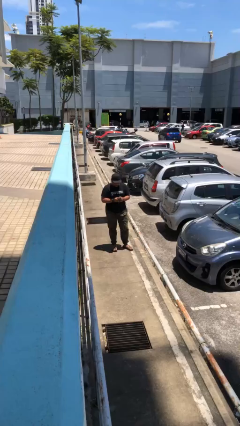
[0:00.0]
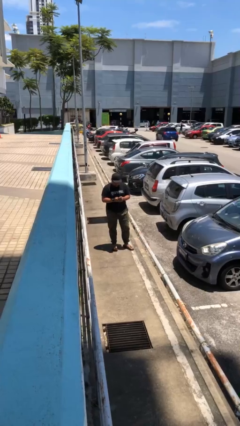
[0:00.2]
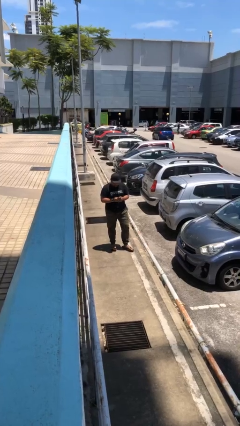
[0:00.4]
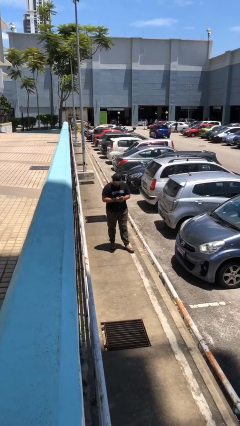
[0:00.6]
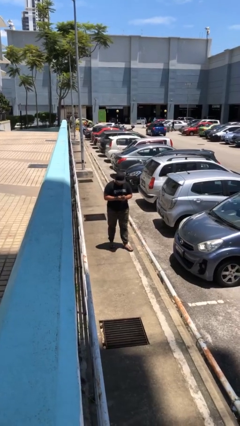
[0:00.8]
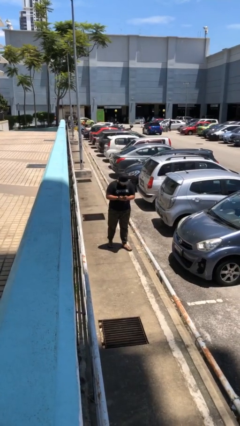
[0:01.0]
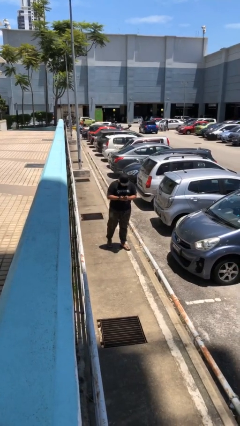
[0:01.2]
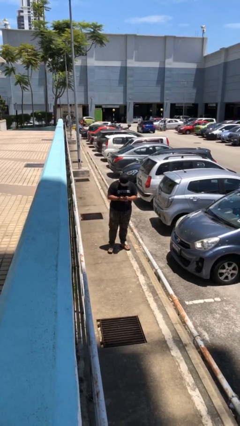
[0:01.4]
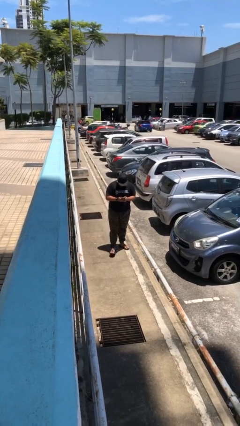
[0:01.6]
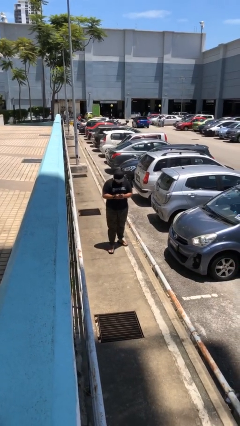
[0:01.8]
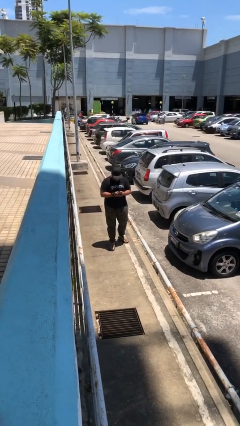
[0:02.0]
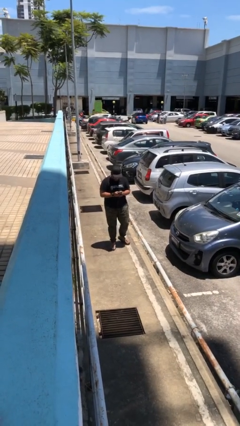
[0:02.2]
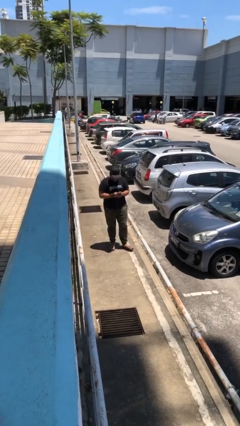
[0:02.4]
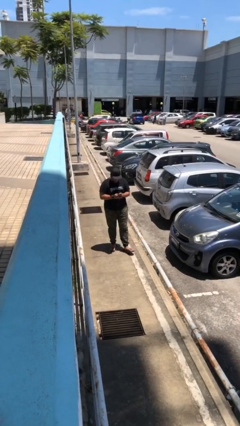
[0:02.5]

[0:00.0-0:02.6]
person texts on phone

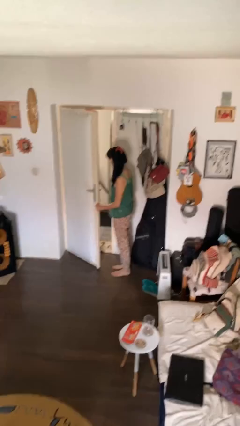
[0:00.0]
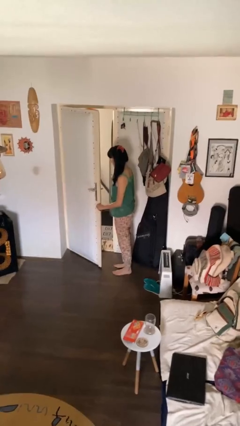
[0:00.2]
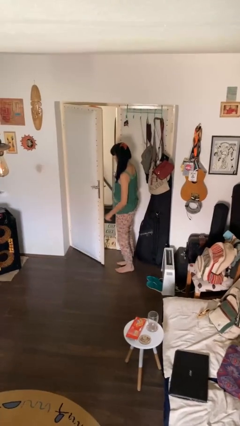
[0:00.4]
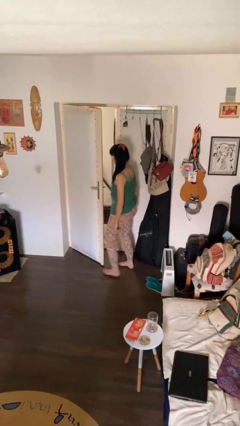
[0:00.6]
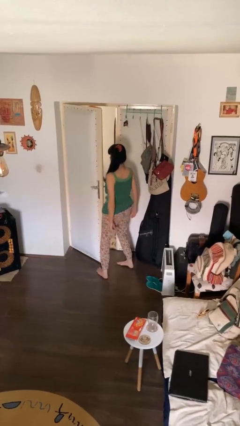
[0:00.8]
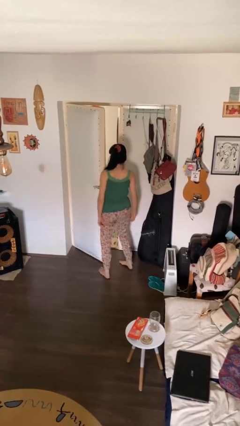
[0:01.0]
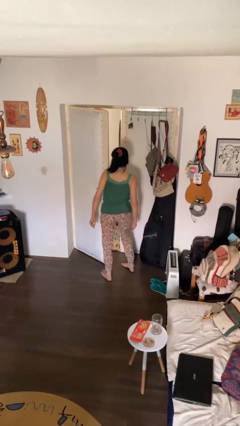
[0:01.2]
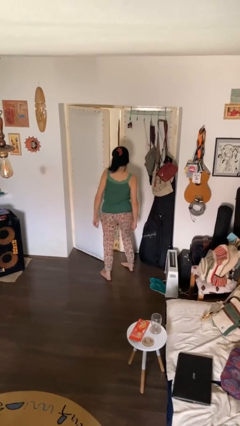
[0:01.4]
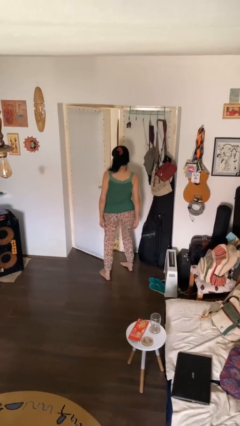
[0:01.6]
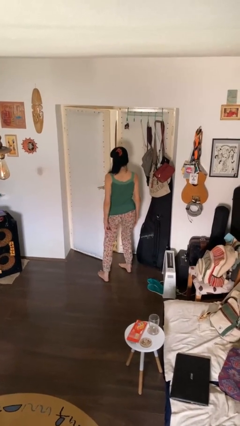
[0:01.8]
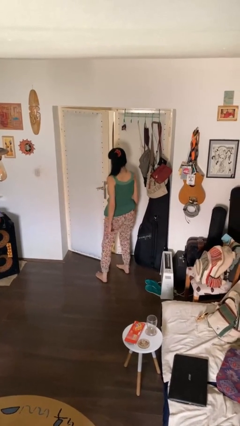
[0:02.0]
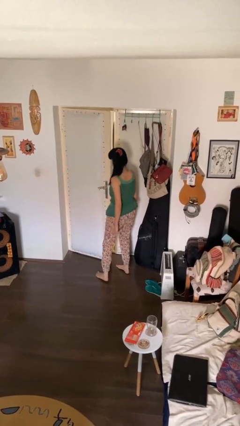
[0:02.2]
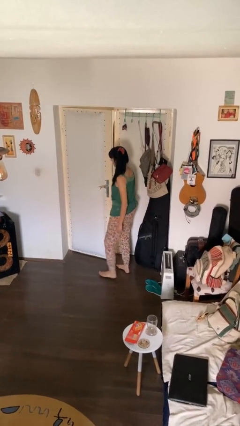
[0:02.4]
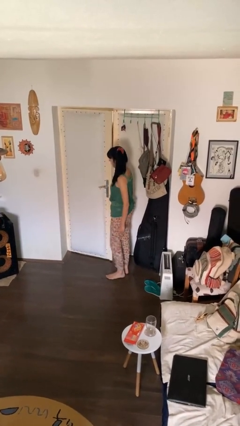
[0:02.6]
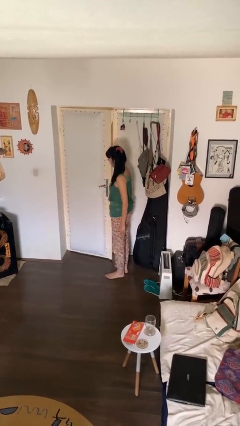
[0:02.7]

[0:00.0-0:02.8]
person closes door with hip

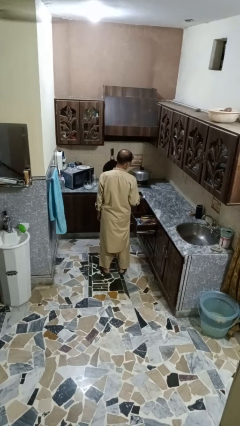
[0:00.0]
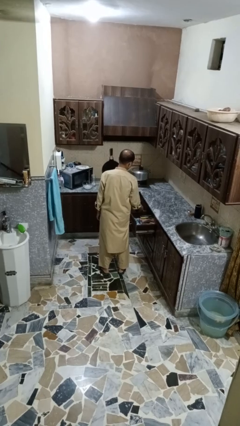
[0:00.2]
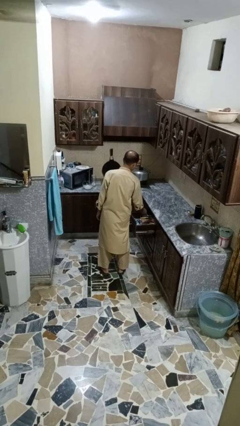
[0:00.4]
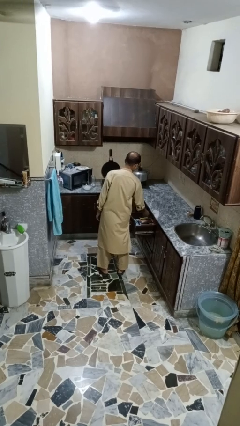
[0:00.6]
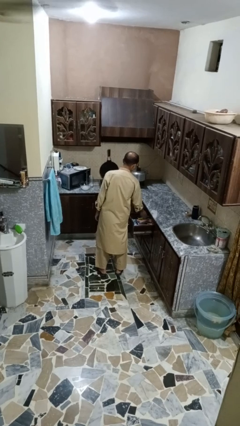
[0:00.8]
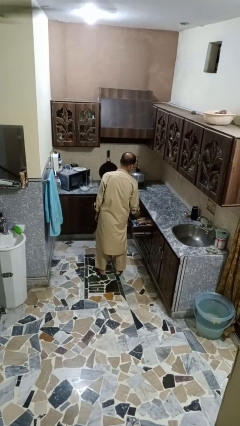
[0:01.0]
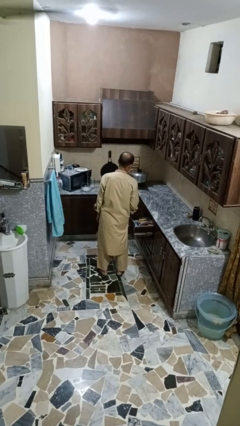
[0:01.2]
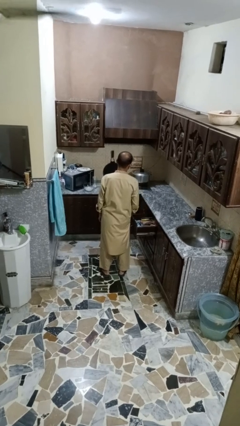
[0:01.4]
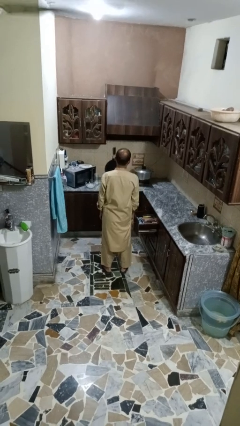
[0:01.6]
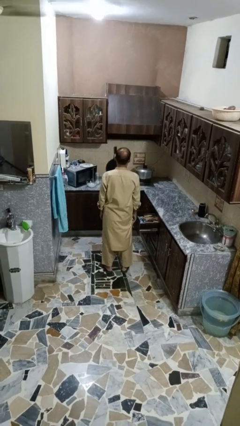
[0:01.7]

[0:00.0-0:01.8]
person puts object into kitchen drawer

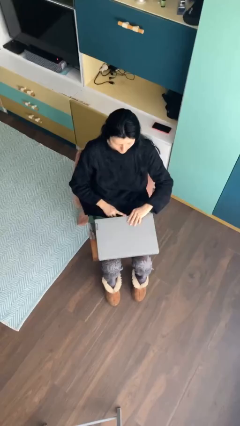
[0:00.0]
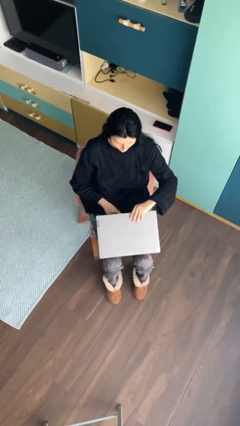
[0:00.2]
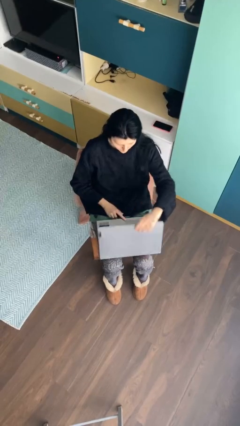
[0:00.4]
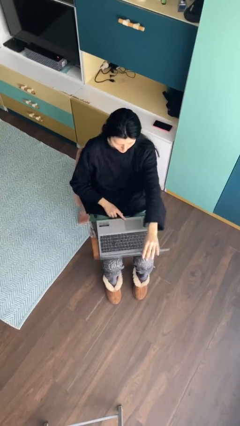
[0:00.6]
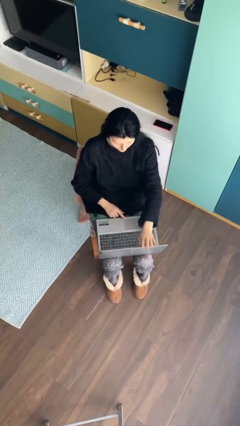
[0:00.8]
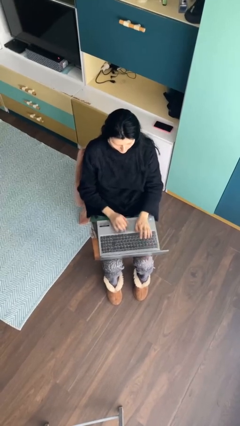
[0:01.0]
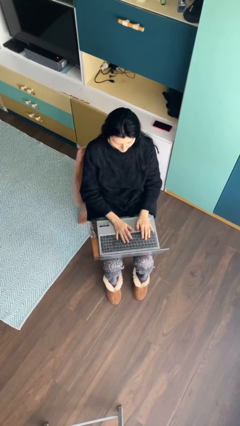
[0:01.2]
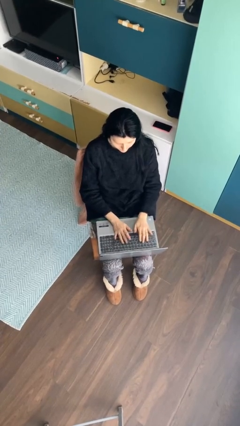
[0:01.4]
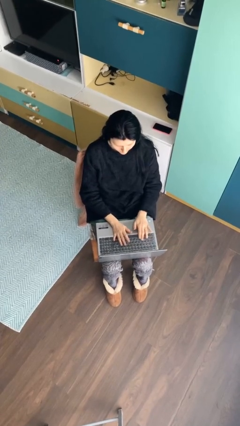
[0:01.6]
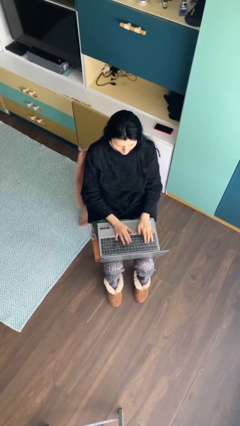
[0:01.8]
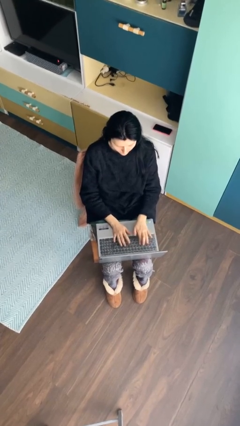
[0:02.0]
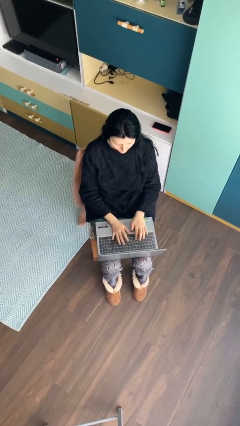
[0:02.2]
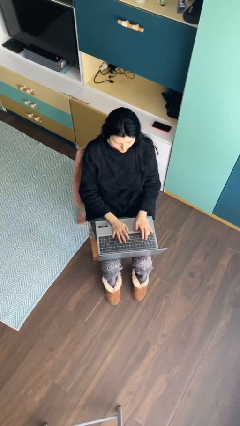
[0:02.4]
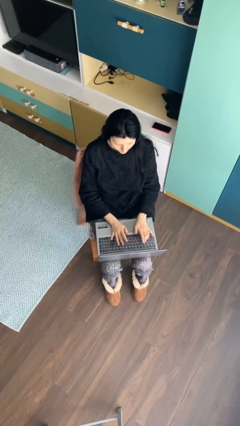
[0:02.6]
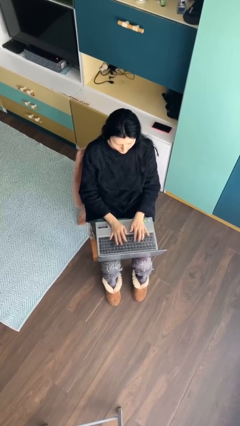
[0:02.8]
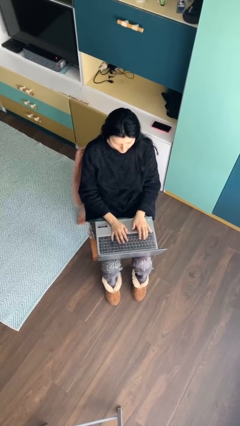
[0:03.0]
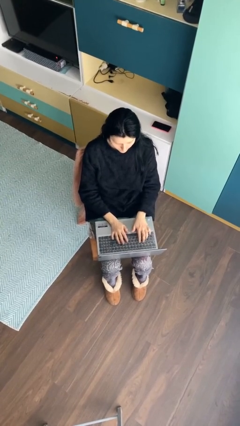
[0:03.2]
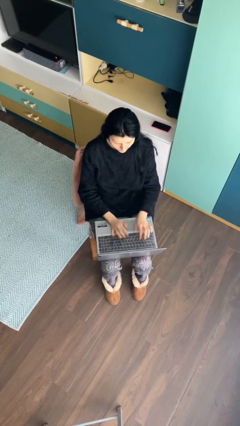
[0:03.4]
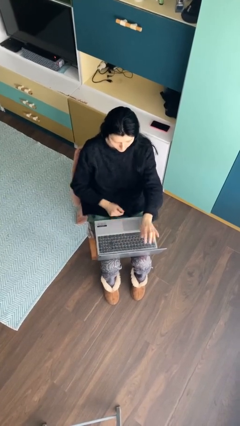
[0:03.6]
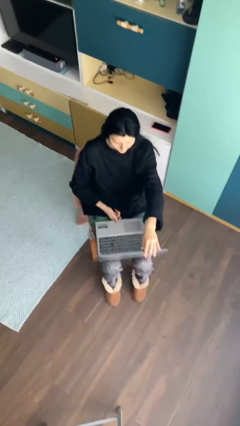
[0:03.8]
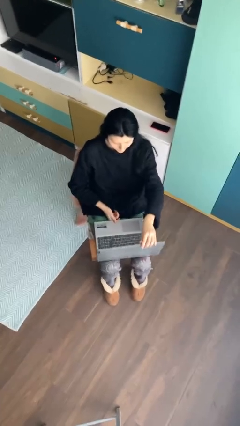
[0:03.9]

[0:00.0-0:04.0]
person interacts with laptop

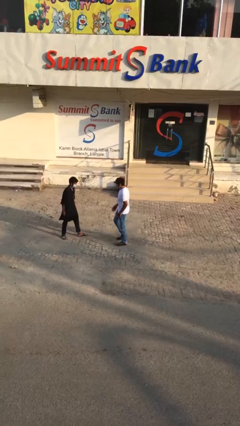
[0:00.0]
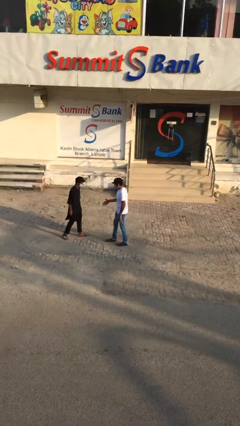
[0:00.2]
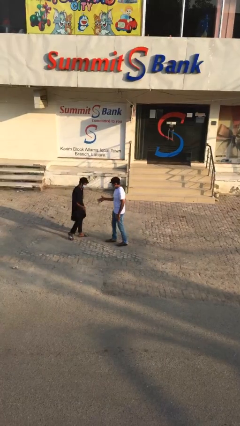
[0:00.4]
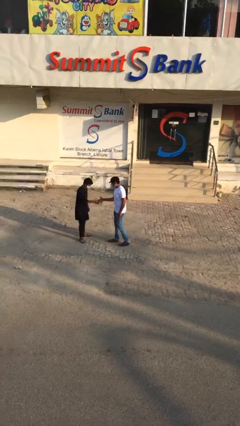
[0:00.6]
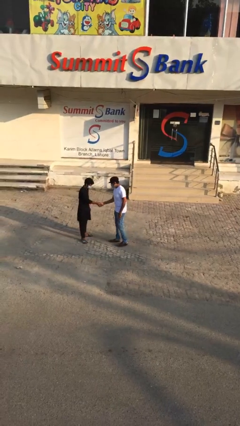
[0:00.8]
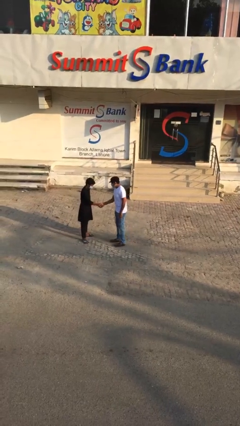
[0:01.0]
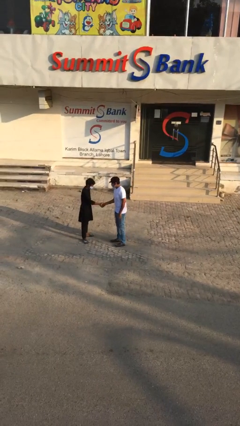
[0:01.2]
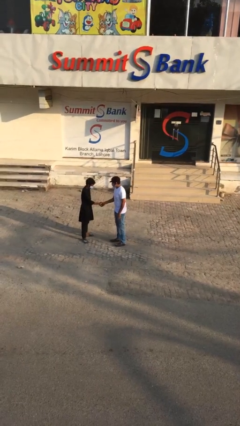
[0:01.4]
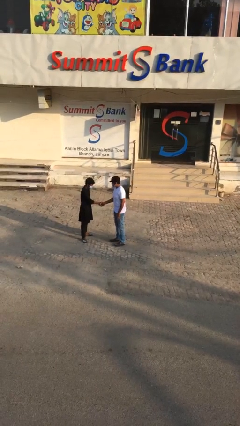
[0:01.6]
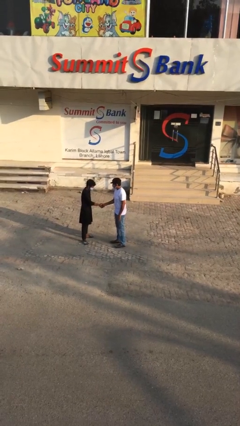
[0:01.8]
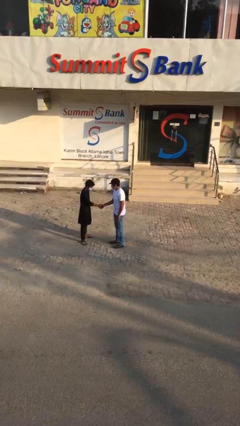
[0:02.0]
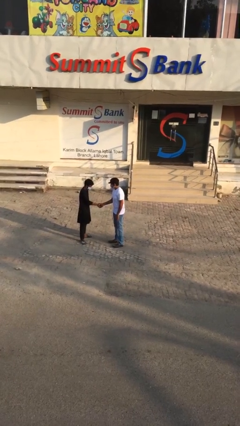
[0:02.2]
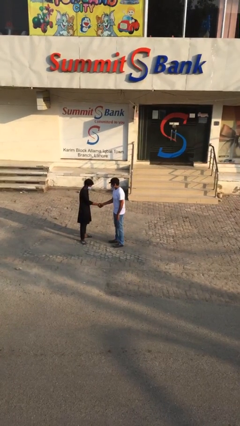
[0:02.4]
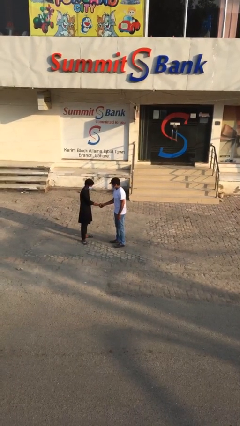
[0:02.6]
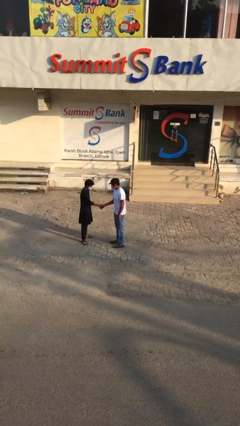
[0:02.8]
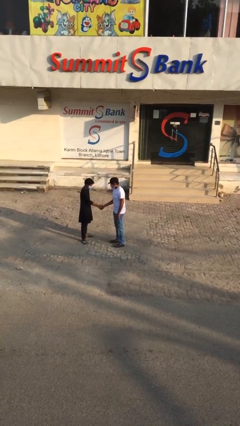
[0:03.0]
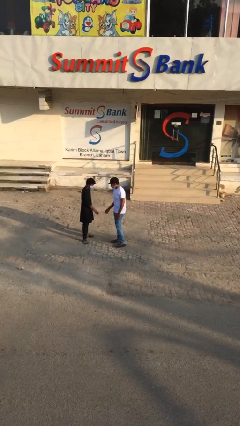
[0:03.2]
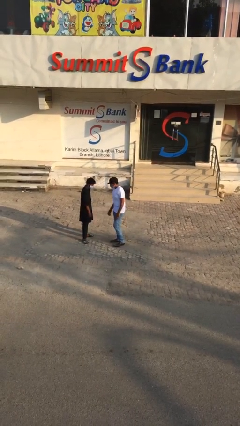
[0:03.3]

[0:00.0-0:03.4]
person shakes hand

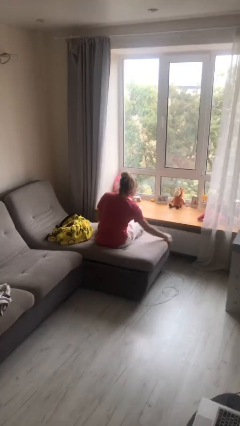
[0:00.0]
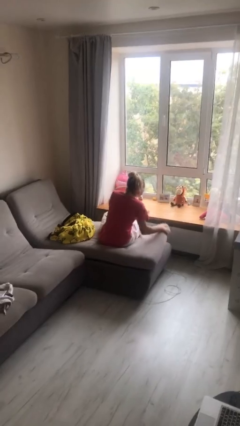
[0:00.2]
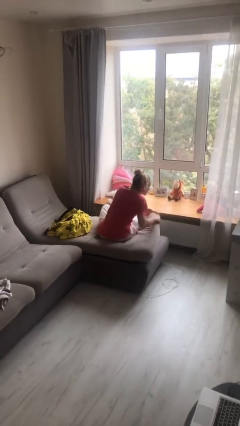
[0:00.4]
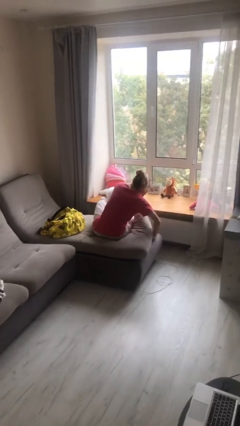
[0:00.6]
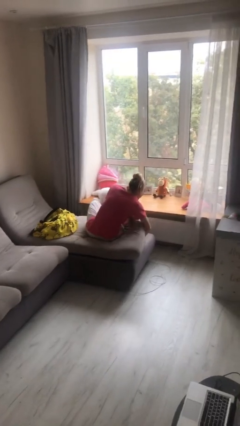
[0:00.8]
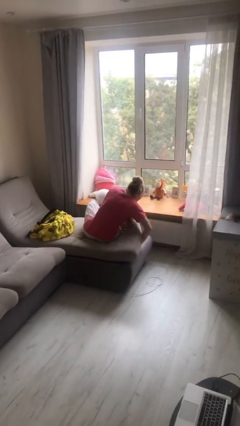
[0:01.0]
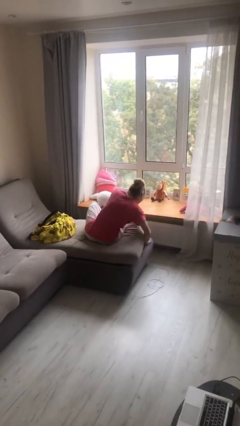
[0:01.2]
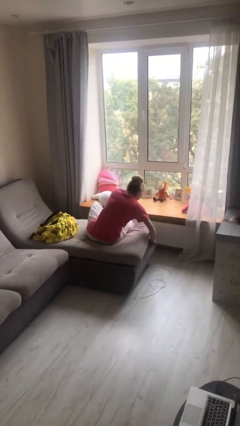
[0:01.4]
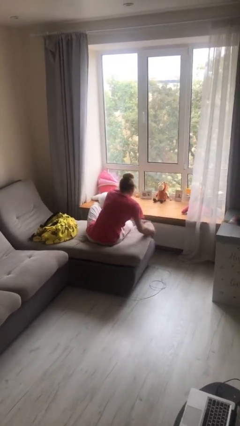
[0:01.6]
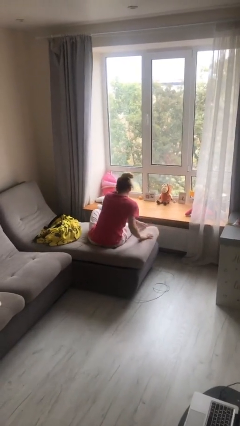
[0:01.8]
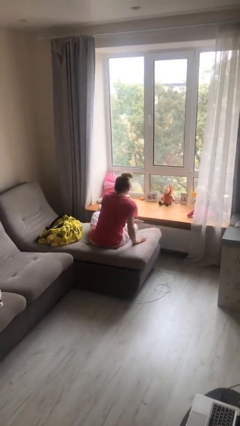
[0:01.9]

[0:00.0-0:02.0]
person searches in couch

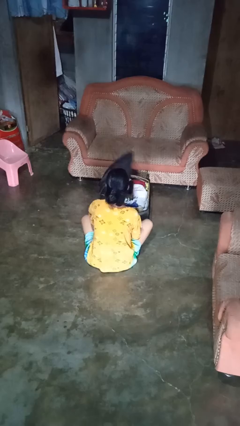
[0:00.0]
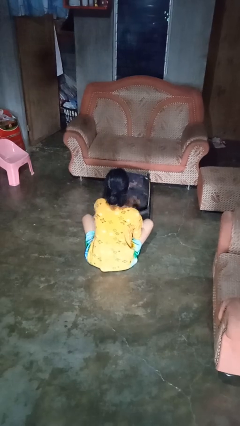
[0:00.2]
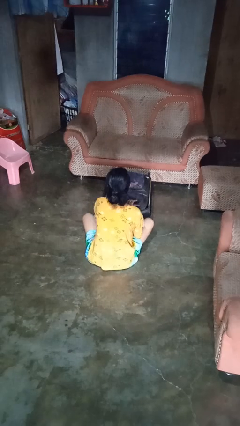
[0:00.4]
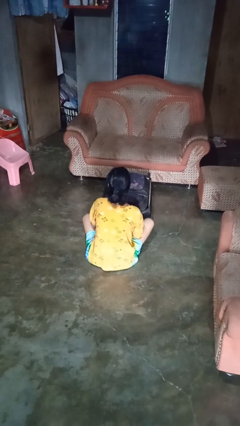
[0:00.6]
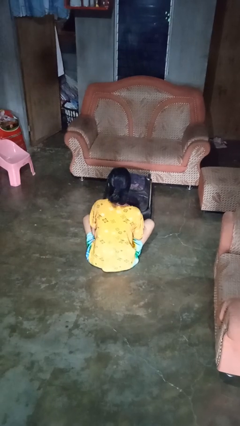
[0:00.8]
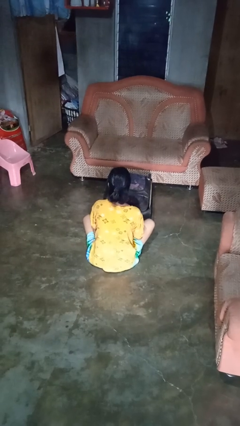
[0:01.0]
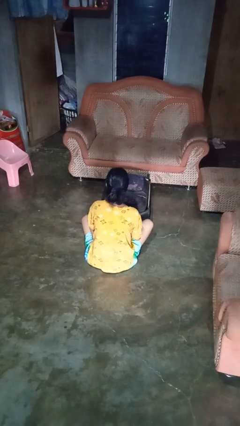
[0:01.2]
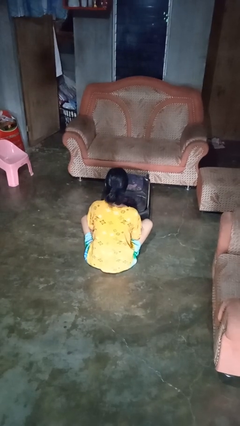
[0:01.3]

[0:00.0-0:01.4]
person closes suitcase
